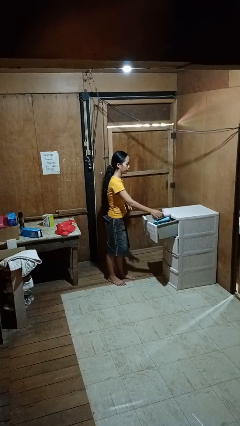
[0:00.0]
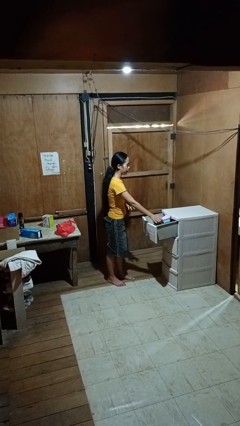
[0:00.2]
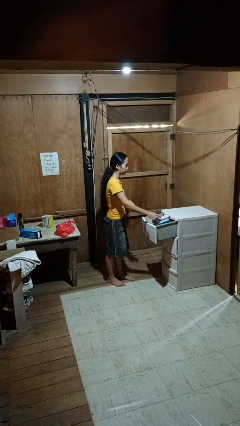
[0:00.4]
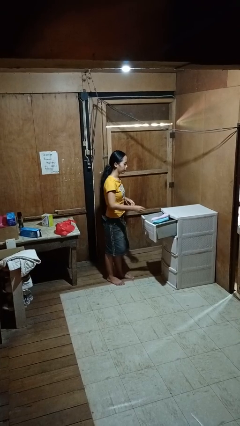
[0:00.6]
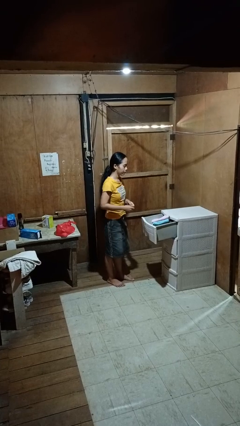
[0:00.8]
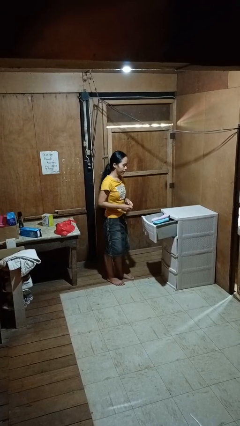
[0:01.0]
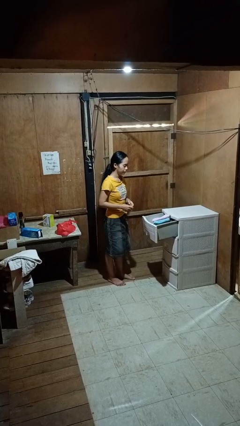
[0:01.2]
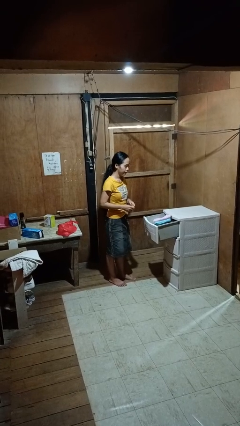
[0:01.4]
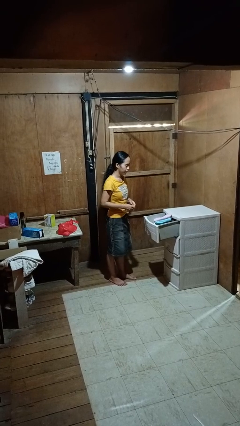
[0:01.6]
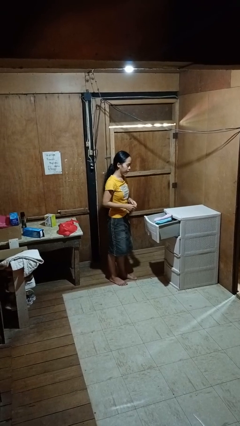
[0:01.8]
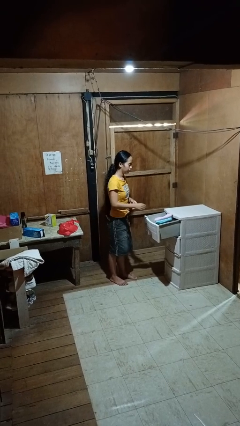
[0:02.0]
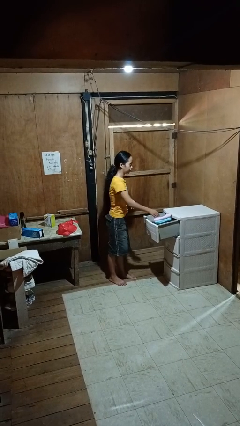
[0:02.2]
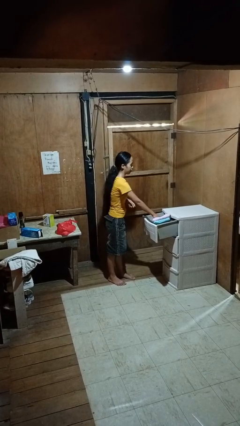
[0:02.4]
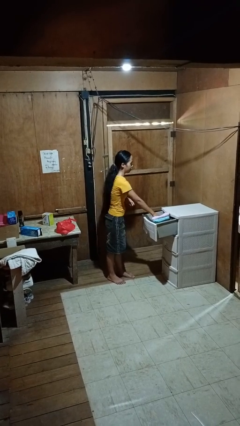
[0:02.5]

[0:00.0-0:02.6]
person puts clothes into dresser

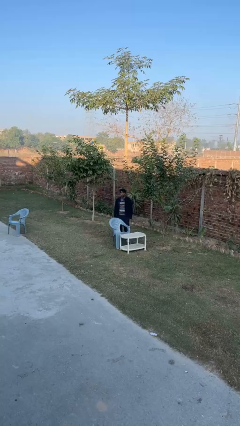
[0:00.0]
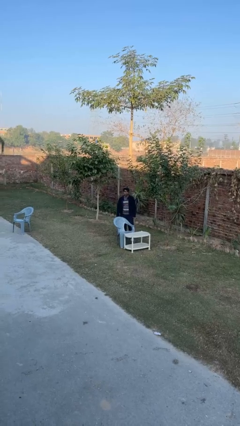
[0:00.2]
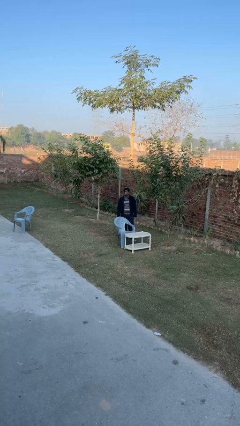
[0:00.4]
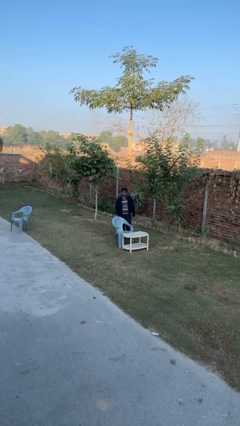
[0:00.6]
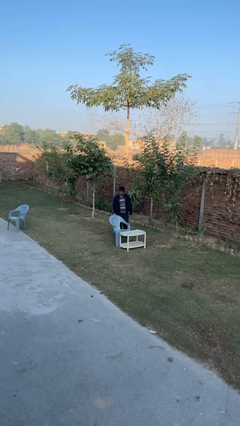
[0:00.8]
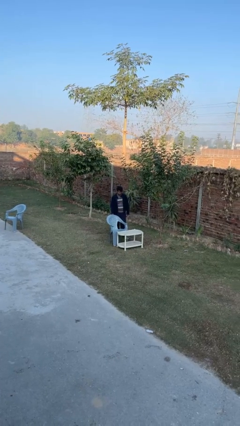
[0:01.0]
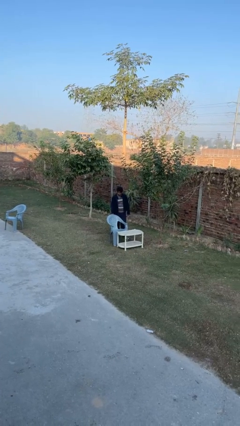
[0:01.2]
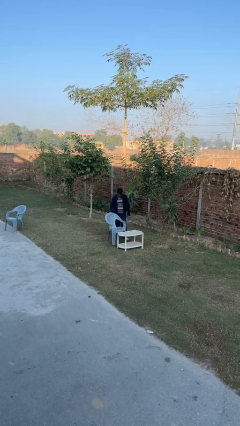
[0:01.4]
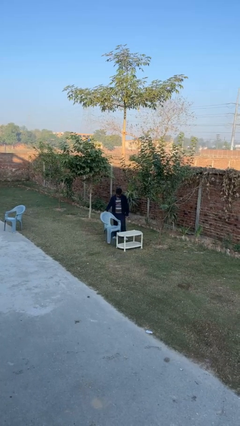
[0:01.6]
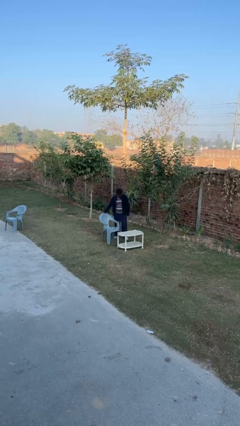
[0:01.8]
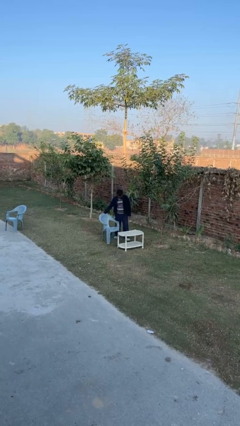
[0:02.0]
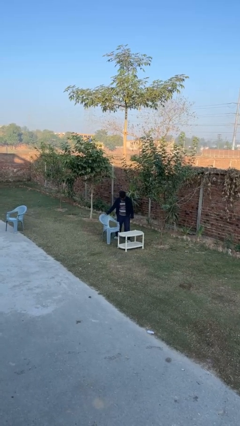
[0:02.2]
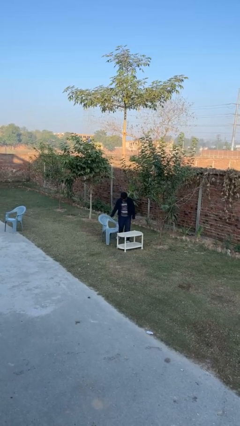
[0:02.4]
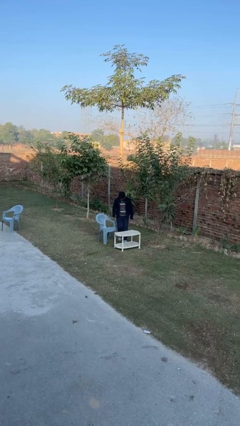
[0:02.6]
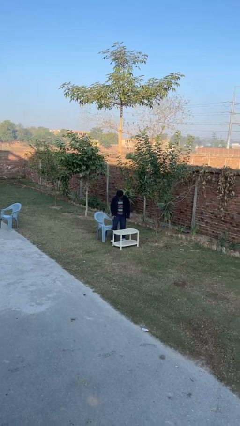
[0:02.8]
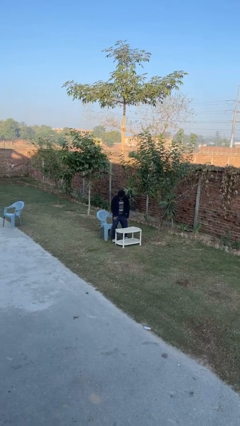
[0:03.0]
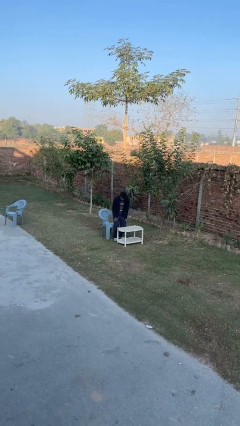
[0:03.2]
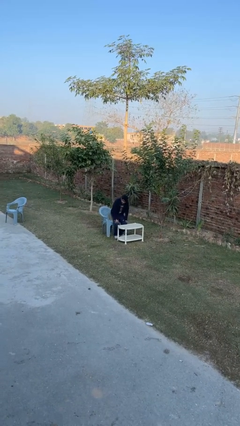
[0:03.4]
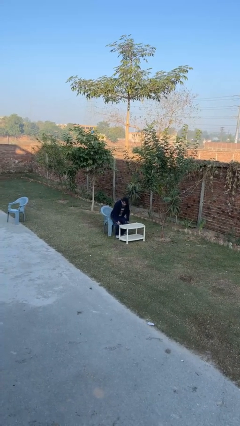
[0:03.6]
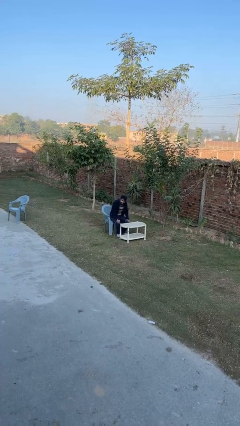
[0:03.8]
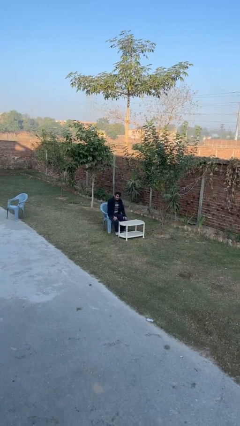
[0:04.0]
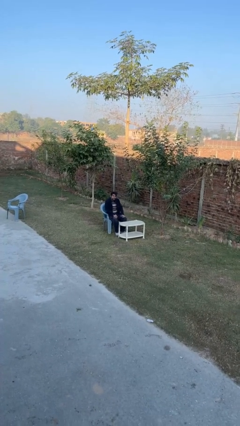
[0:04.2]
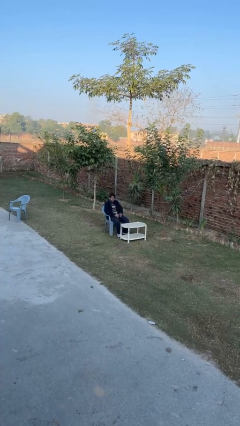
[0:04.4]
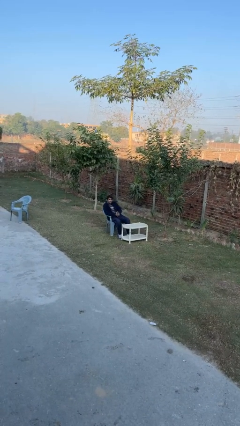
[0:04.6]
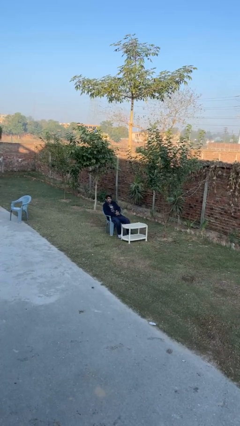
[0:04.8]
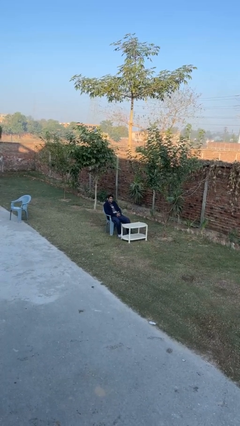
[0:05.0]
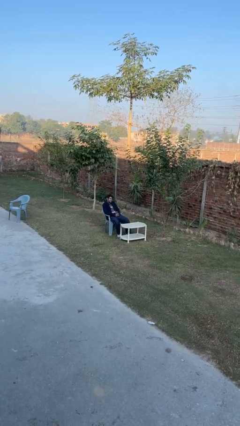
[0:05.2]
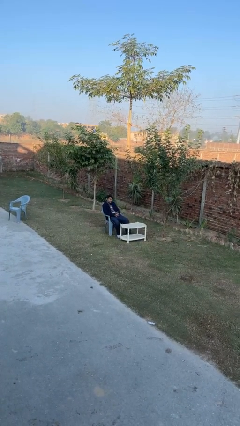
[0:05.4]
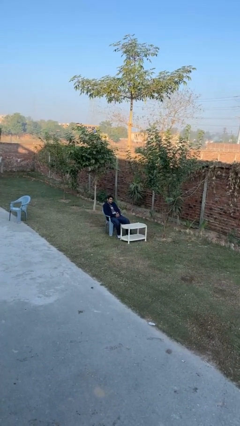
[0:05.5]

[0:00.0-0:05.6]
person sits down

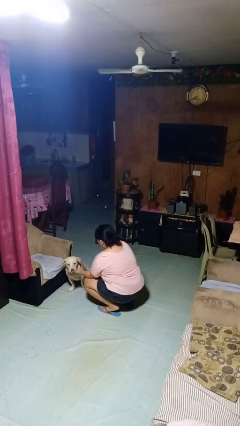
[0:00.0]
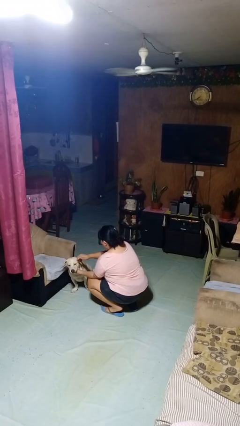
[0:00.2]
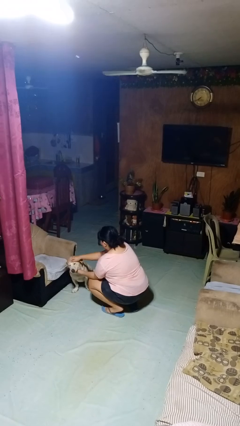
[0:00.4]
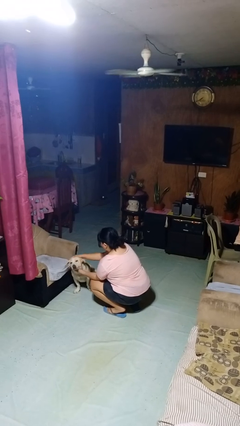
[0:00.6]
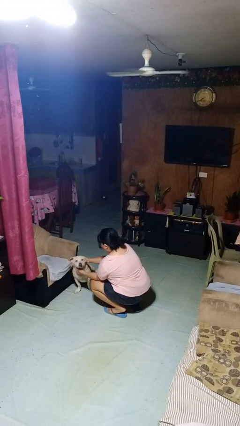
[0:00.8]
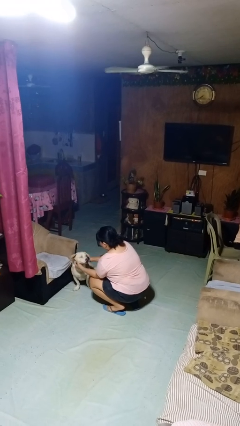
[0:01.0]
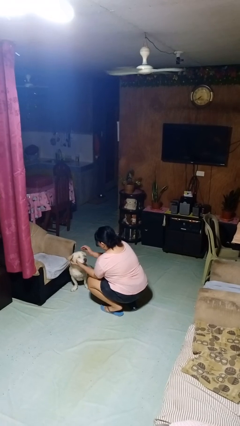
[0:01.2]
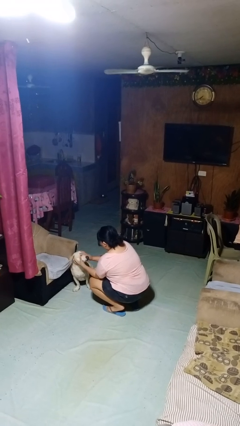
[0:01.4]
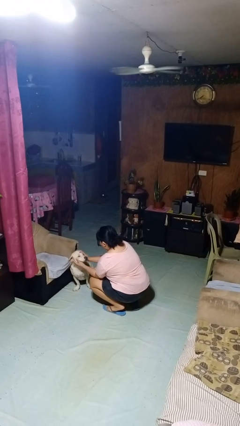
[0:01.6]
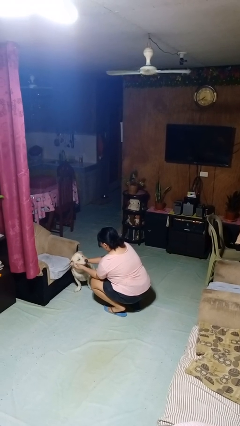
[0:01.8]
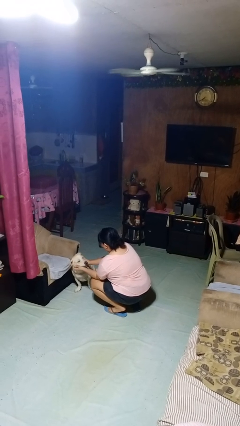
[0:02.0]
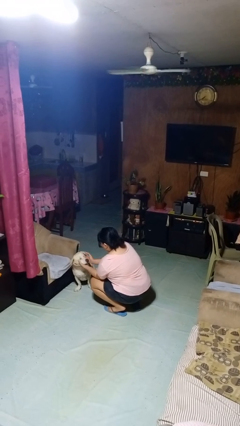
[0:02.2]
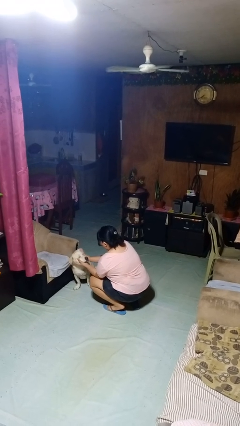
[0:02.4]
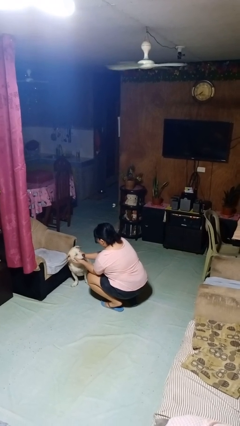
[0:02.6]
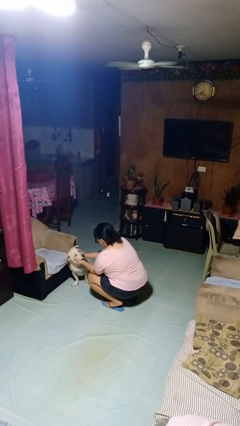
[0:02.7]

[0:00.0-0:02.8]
person pets dog

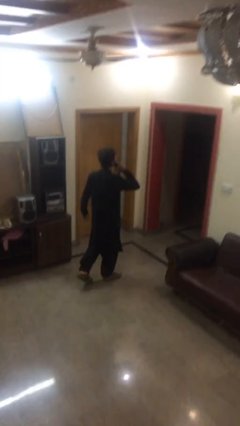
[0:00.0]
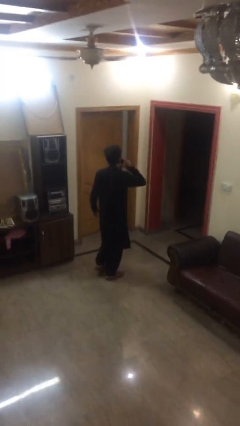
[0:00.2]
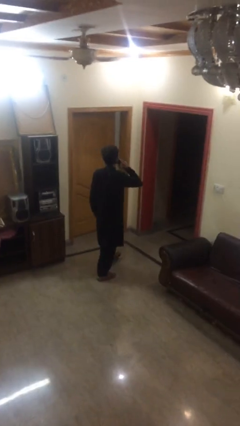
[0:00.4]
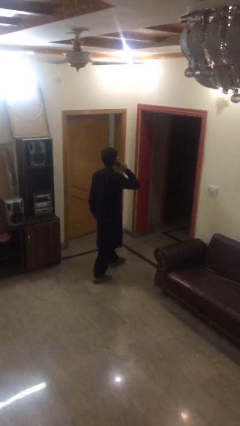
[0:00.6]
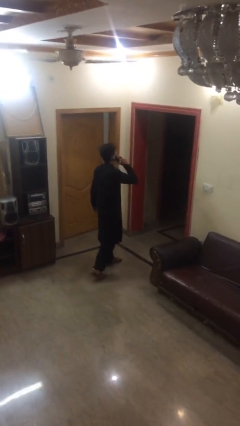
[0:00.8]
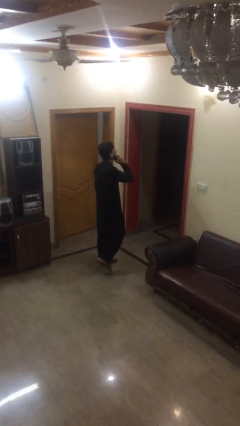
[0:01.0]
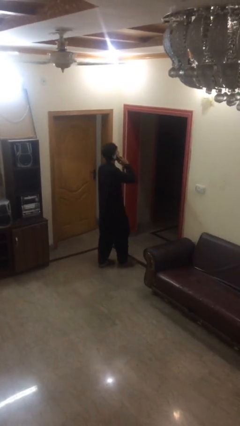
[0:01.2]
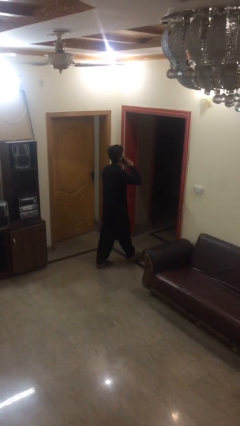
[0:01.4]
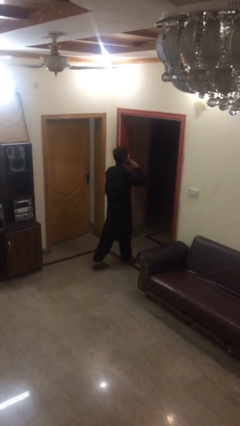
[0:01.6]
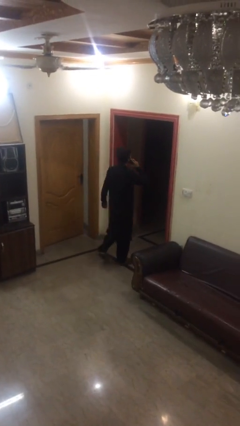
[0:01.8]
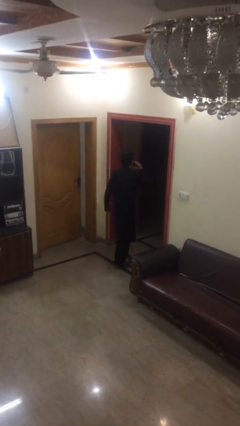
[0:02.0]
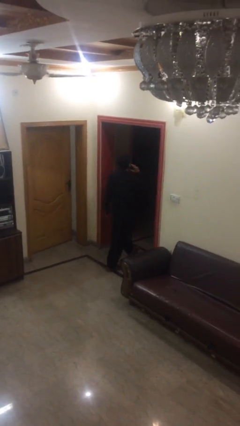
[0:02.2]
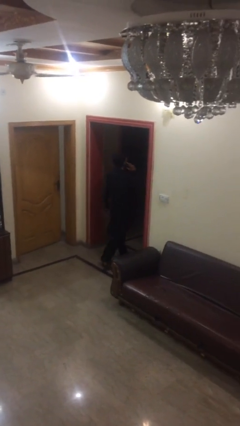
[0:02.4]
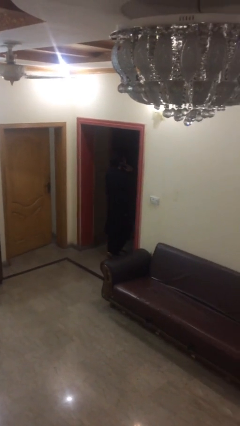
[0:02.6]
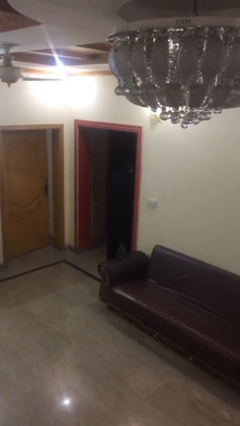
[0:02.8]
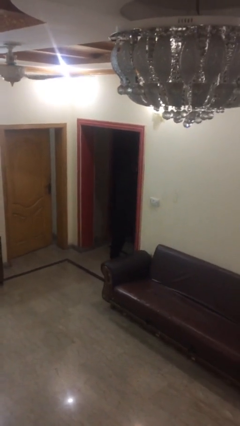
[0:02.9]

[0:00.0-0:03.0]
person exits scene through structure

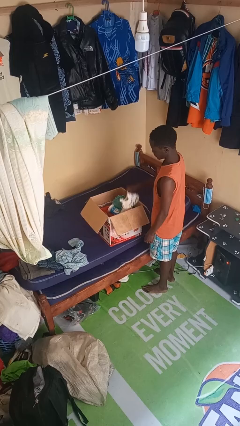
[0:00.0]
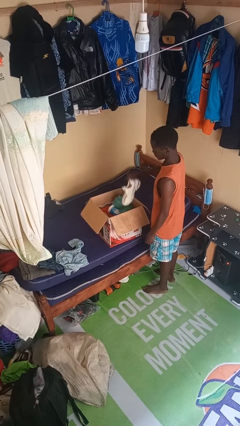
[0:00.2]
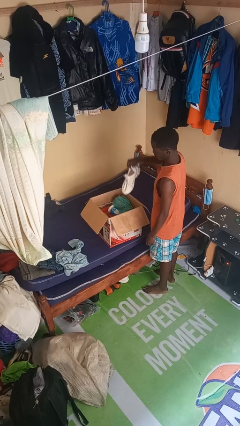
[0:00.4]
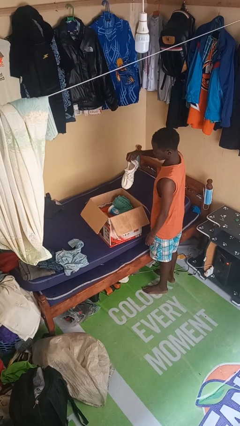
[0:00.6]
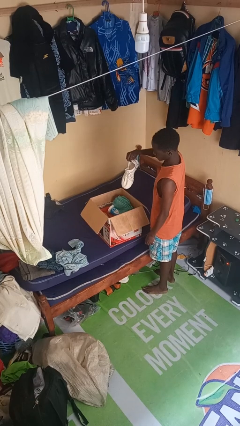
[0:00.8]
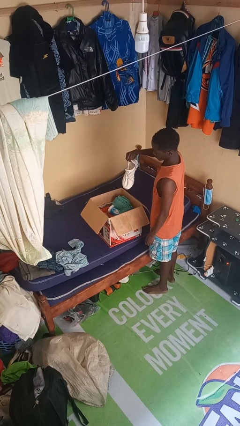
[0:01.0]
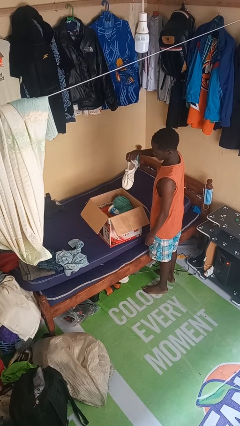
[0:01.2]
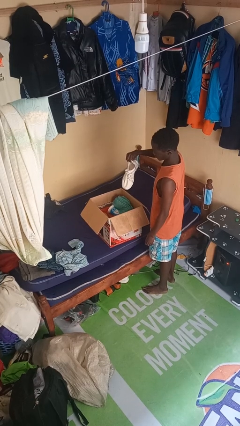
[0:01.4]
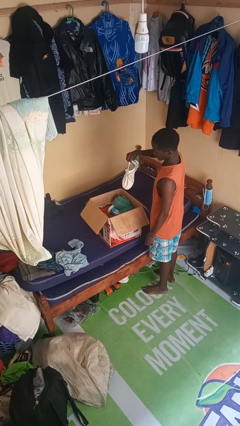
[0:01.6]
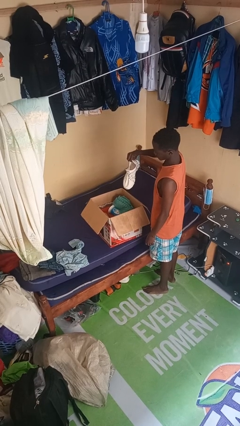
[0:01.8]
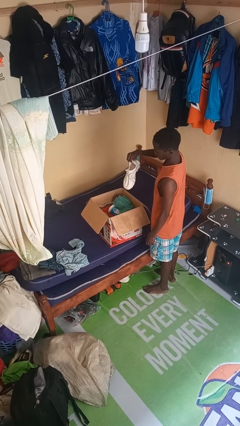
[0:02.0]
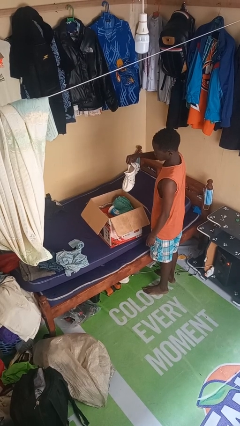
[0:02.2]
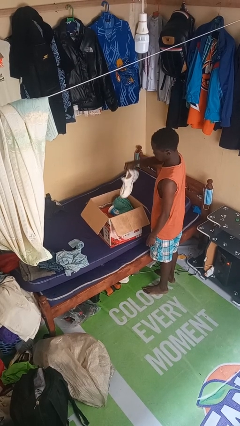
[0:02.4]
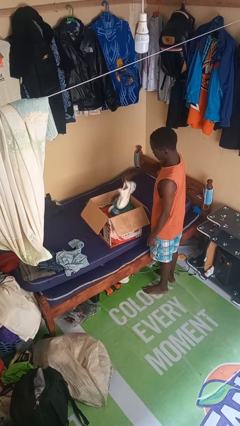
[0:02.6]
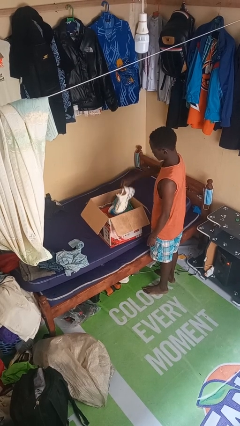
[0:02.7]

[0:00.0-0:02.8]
person takes object from box
